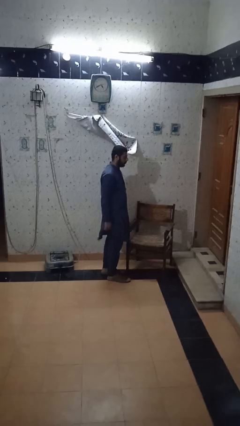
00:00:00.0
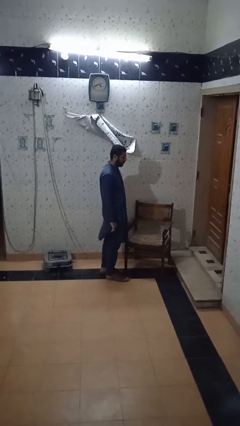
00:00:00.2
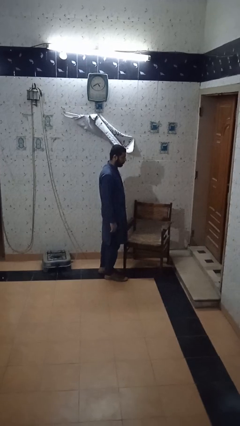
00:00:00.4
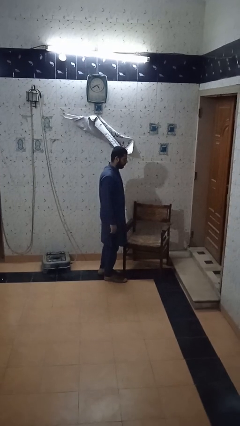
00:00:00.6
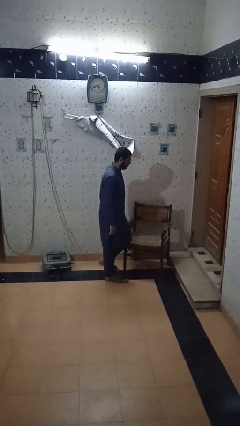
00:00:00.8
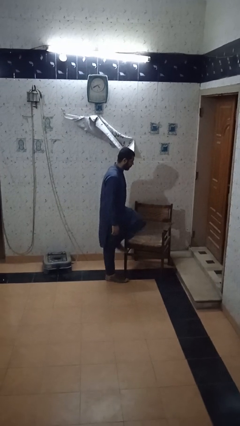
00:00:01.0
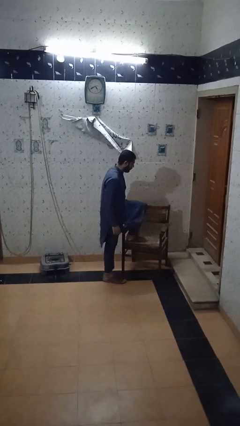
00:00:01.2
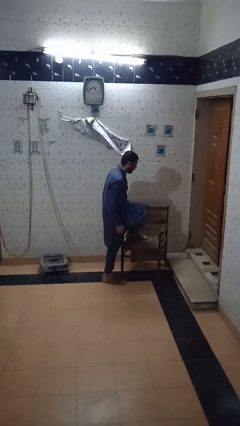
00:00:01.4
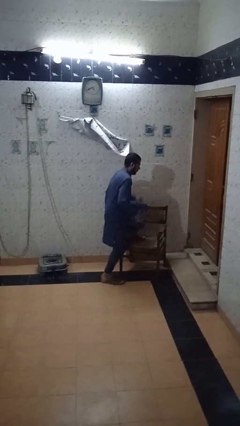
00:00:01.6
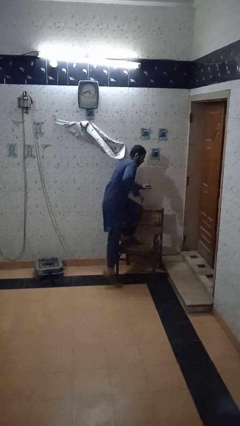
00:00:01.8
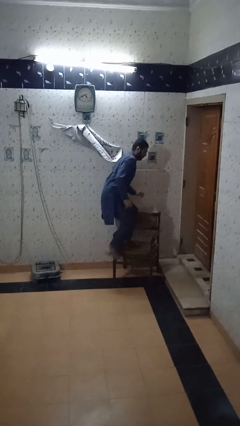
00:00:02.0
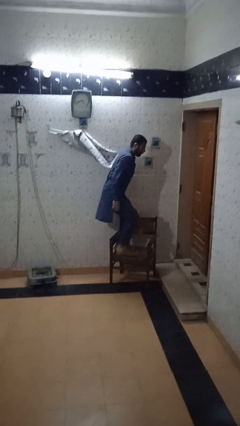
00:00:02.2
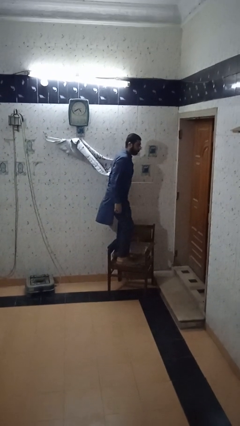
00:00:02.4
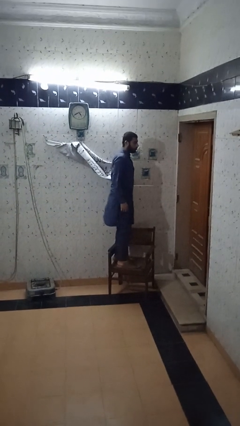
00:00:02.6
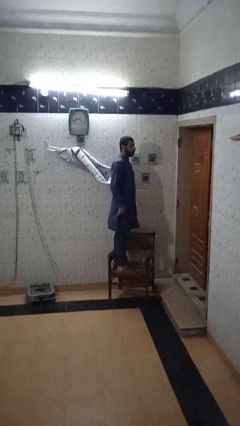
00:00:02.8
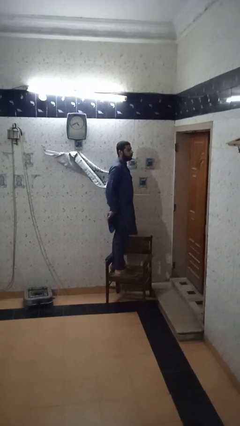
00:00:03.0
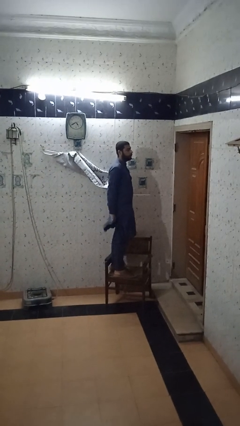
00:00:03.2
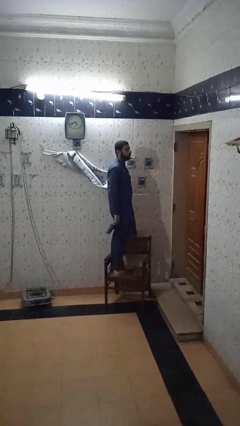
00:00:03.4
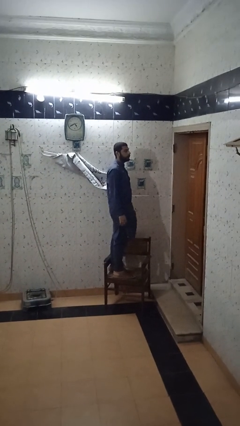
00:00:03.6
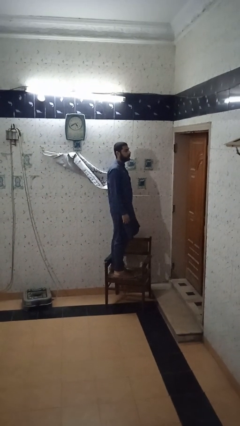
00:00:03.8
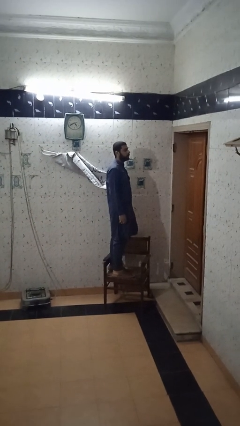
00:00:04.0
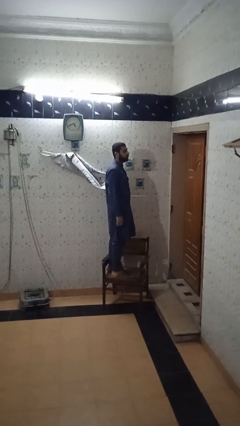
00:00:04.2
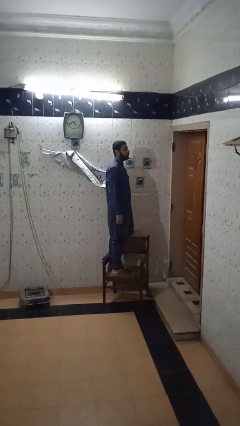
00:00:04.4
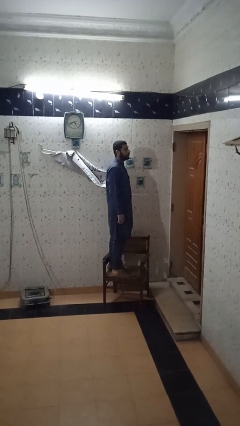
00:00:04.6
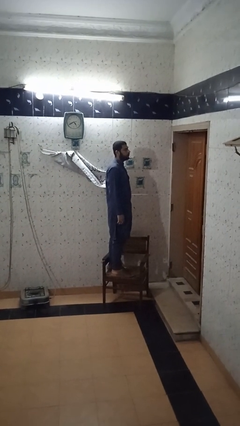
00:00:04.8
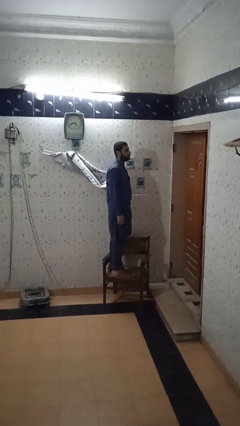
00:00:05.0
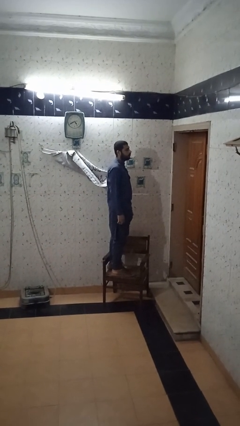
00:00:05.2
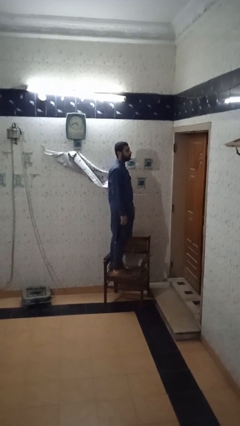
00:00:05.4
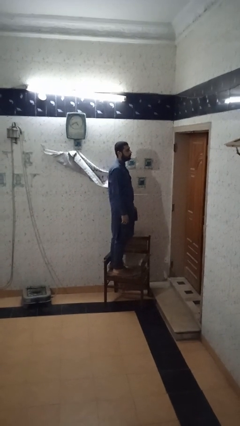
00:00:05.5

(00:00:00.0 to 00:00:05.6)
person climbs on chair

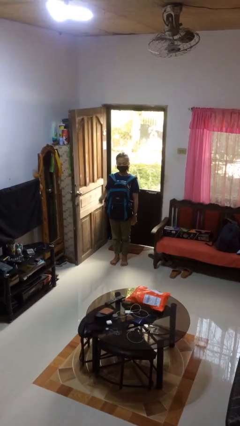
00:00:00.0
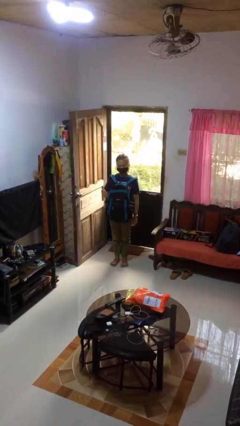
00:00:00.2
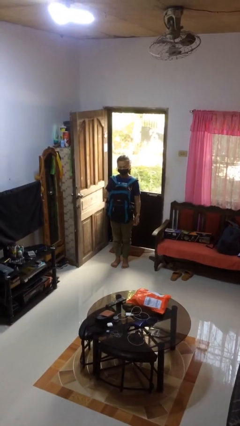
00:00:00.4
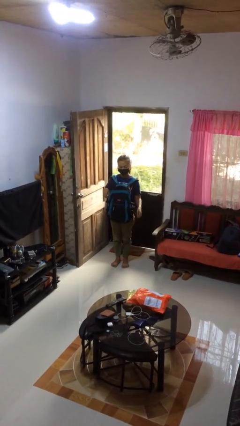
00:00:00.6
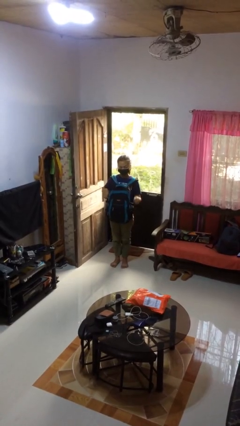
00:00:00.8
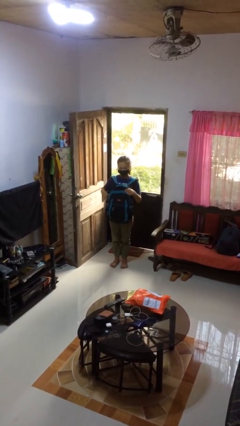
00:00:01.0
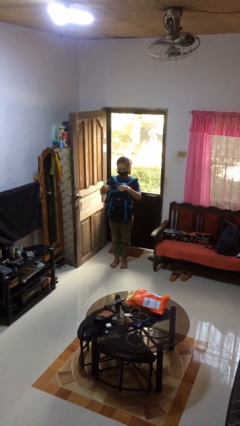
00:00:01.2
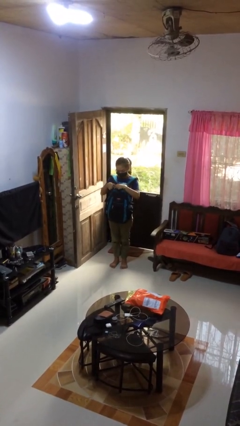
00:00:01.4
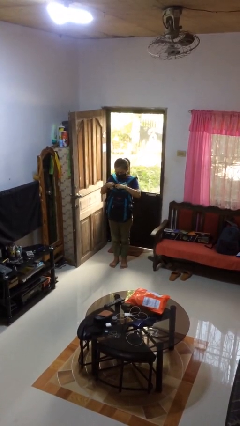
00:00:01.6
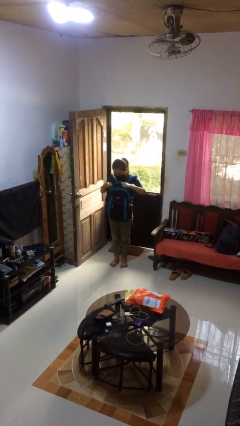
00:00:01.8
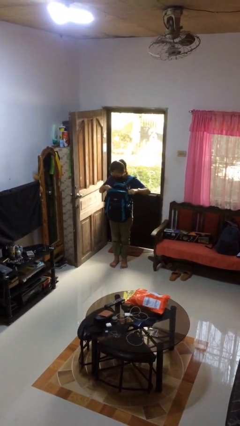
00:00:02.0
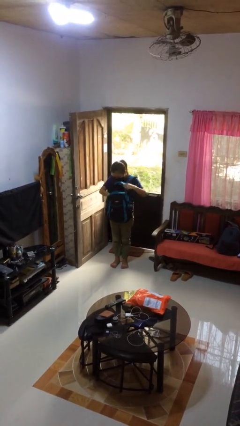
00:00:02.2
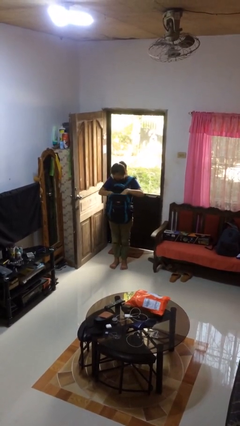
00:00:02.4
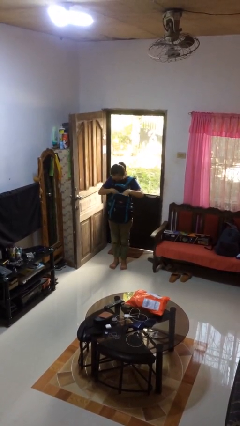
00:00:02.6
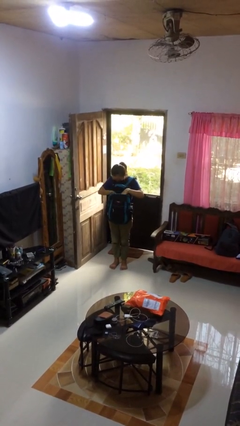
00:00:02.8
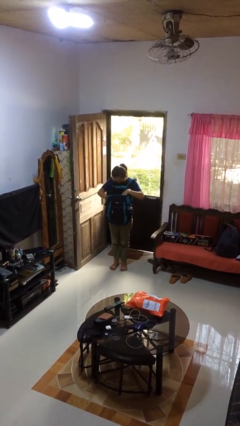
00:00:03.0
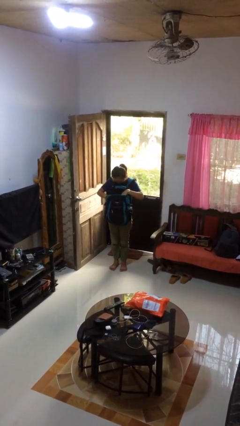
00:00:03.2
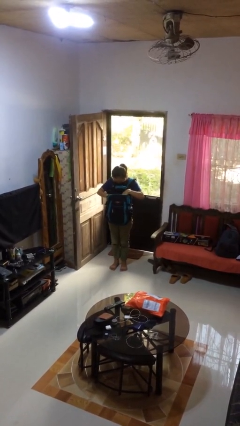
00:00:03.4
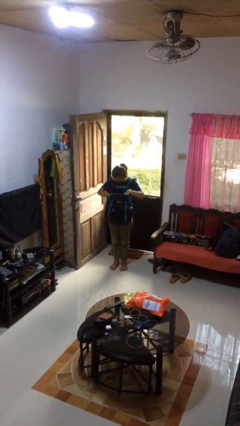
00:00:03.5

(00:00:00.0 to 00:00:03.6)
person searches in backpack

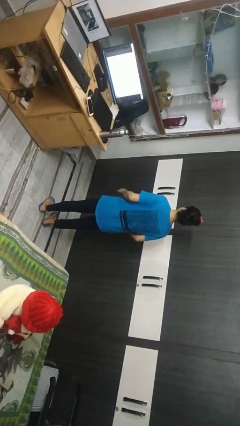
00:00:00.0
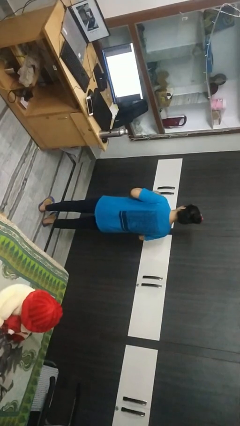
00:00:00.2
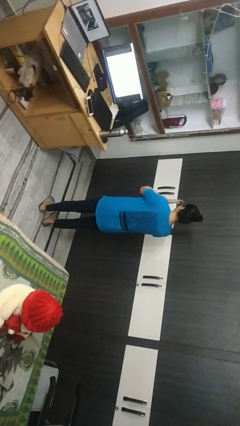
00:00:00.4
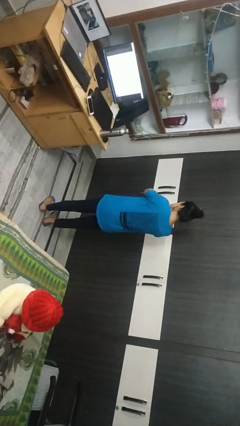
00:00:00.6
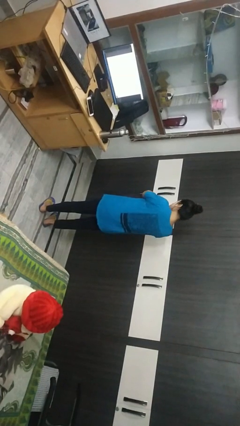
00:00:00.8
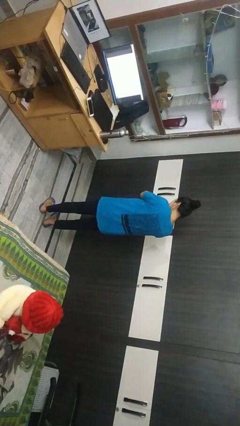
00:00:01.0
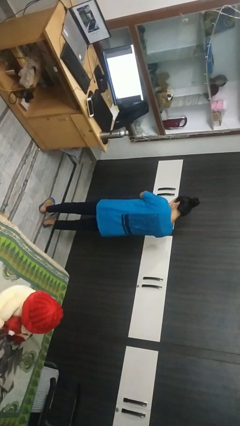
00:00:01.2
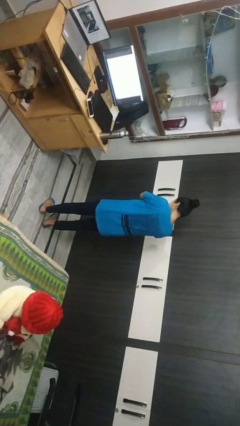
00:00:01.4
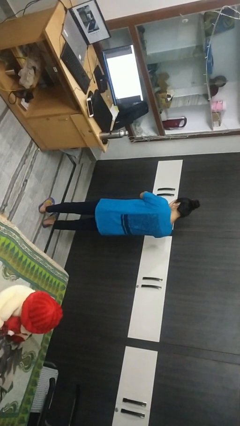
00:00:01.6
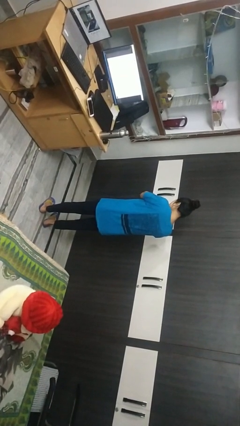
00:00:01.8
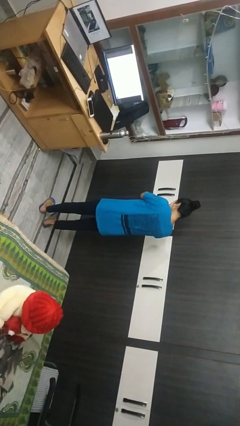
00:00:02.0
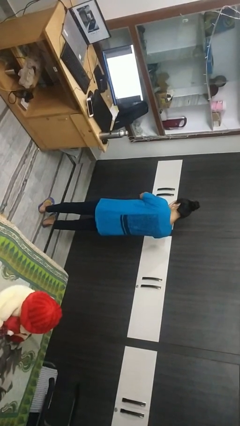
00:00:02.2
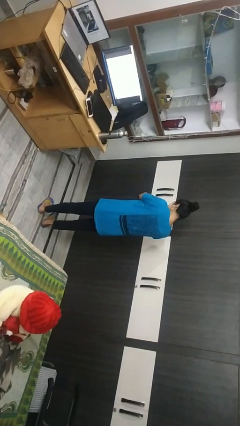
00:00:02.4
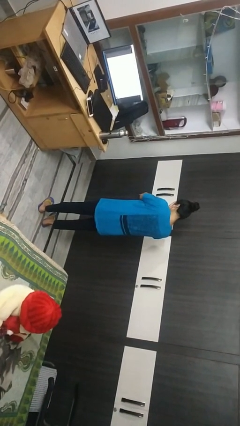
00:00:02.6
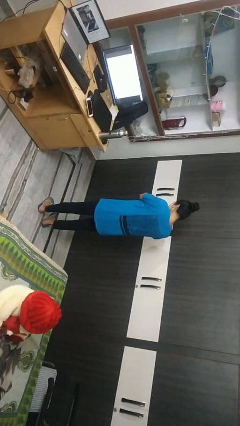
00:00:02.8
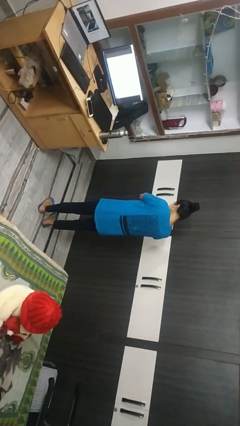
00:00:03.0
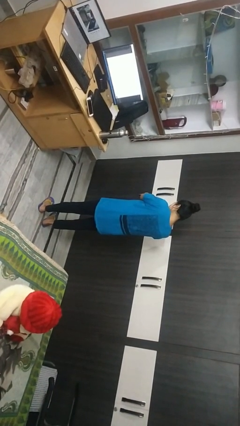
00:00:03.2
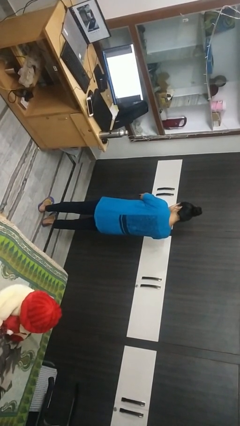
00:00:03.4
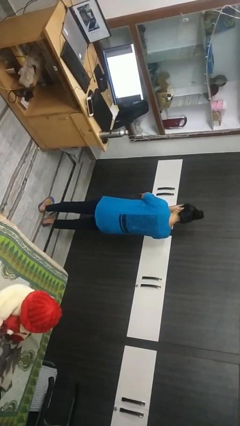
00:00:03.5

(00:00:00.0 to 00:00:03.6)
person covers face with hands

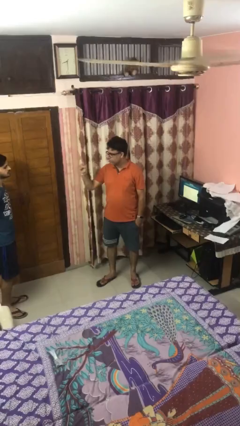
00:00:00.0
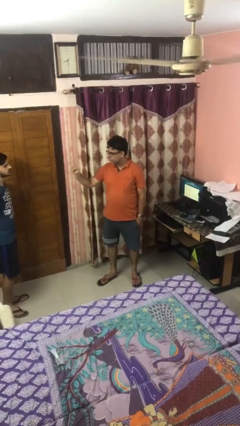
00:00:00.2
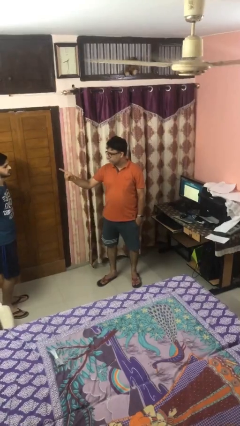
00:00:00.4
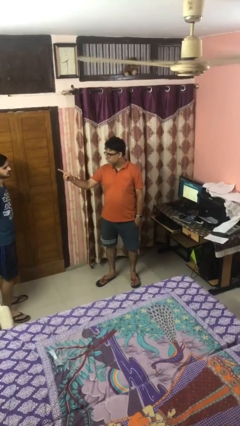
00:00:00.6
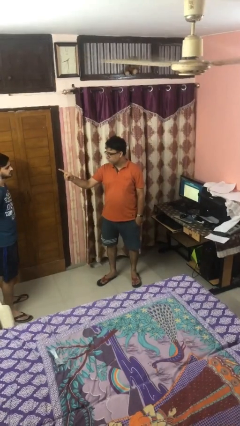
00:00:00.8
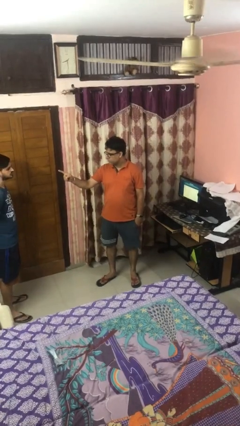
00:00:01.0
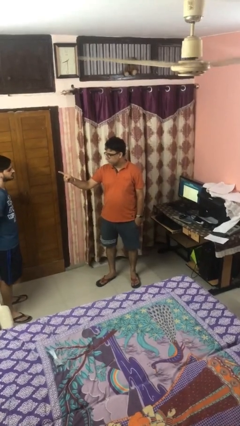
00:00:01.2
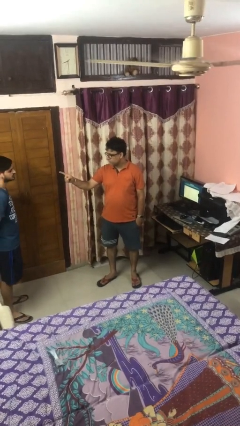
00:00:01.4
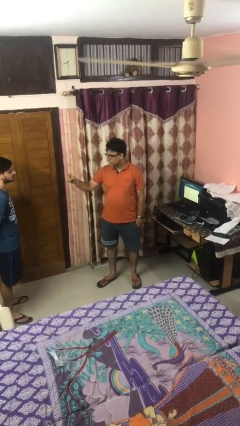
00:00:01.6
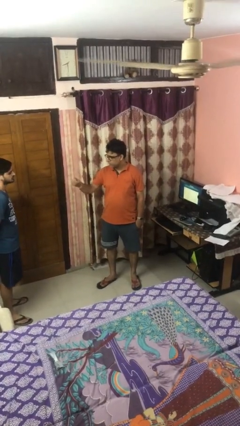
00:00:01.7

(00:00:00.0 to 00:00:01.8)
person points at person

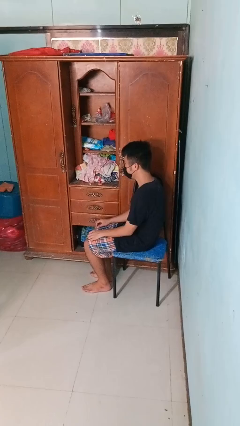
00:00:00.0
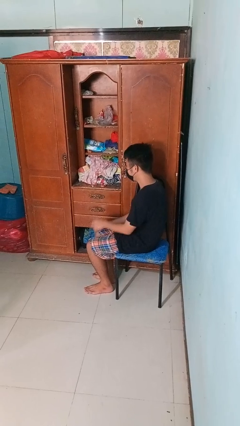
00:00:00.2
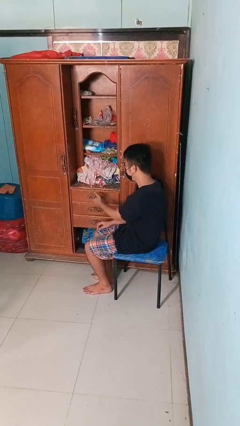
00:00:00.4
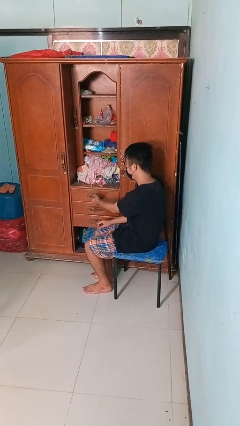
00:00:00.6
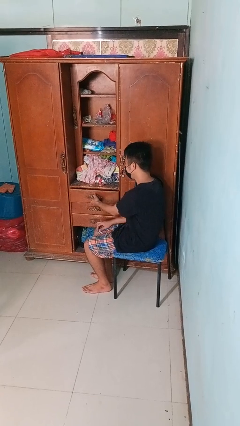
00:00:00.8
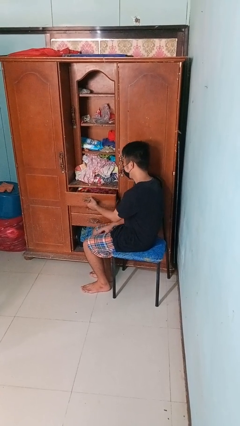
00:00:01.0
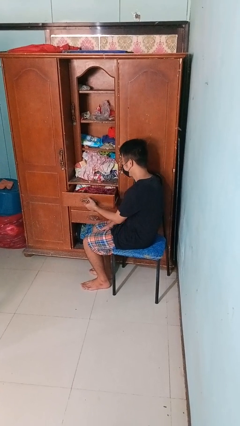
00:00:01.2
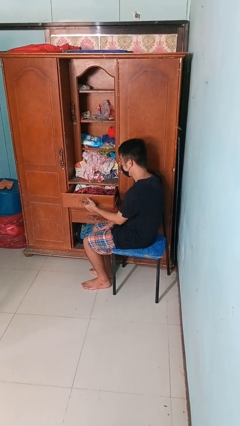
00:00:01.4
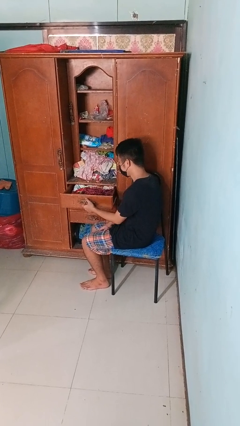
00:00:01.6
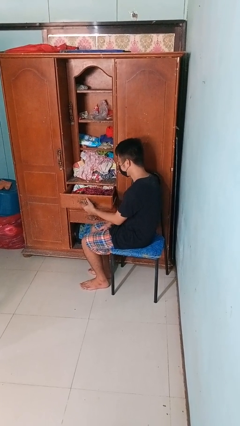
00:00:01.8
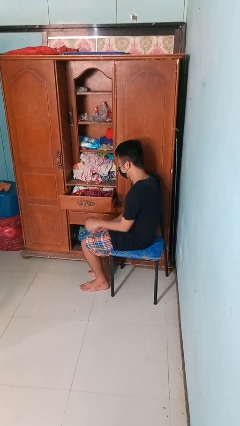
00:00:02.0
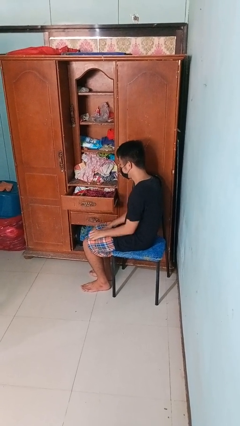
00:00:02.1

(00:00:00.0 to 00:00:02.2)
person opens dresser drawer

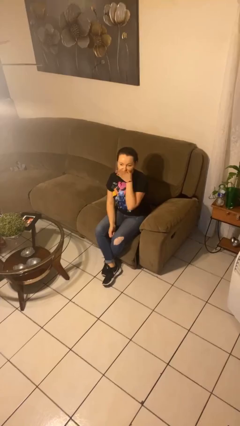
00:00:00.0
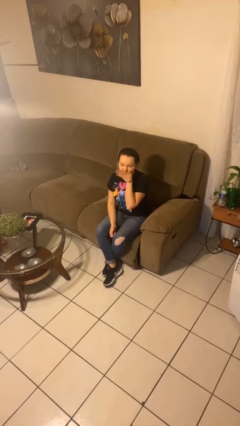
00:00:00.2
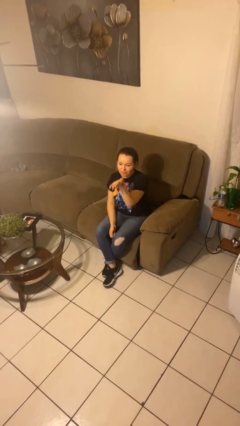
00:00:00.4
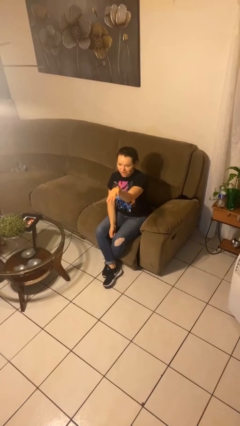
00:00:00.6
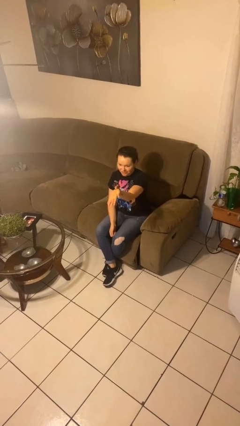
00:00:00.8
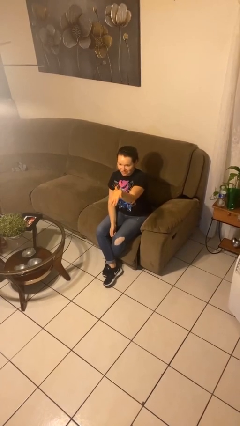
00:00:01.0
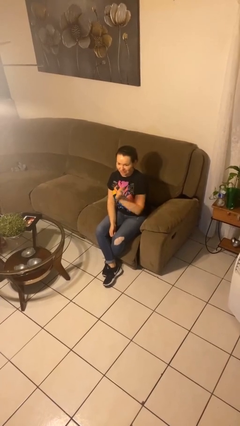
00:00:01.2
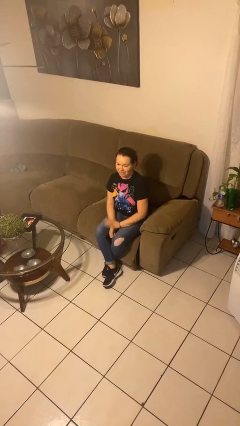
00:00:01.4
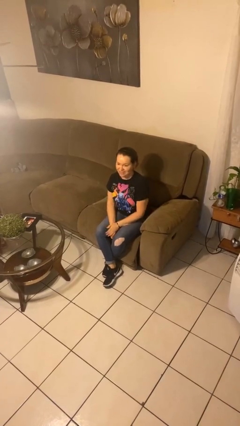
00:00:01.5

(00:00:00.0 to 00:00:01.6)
person gestures blow kiss